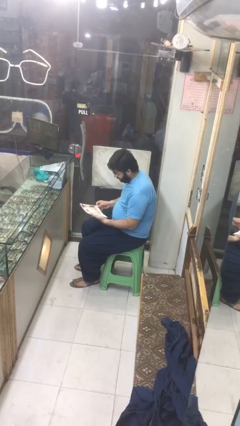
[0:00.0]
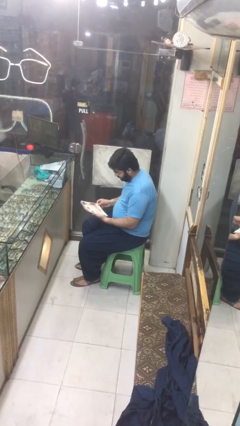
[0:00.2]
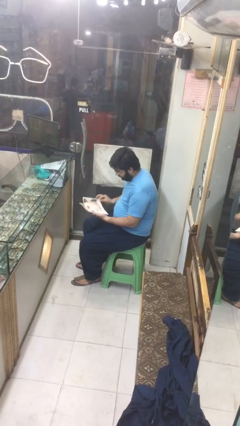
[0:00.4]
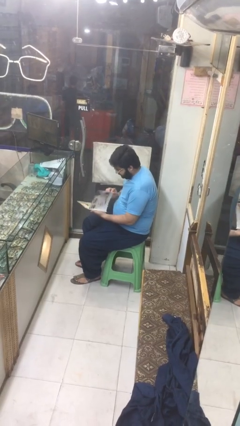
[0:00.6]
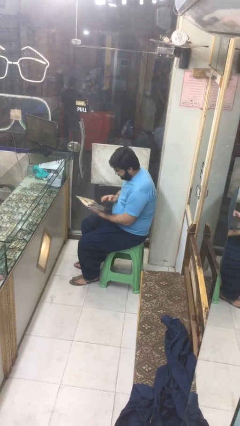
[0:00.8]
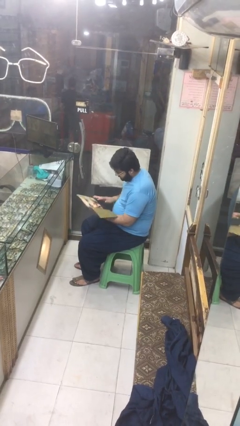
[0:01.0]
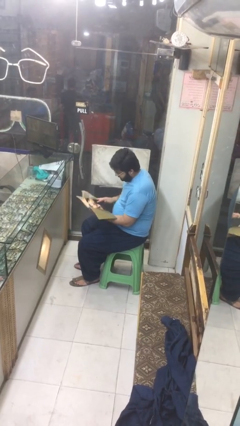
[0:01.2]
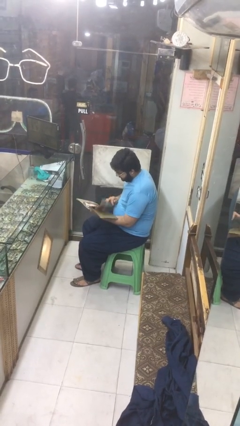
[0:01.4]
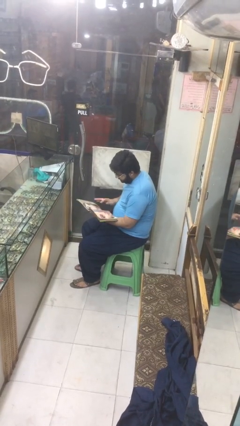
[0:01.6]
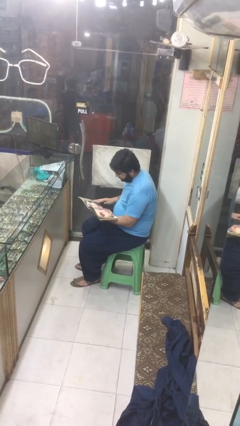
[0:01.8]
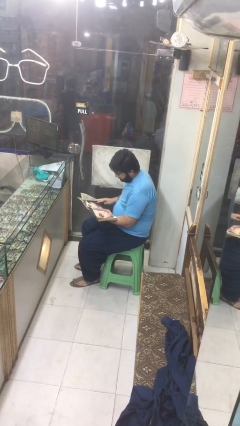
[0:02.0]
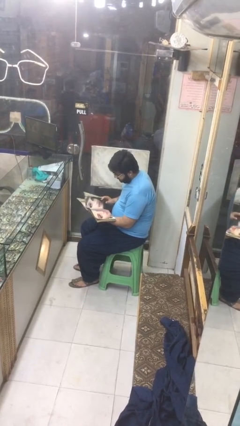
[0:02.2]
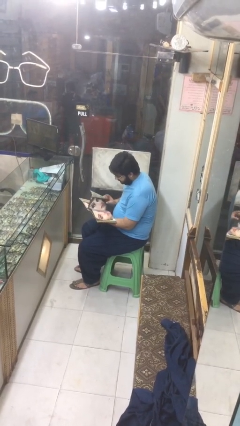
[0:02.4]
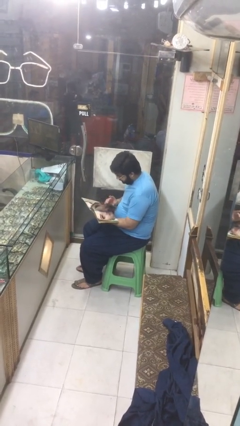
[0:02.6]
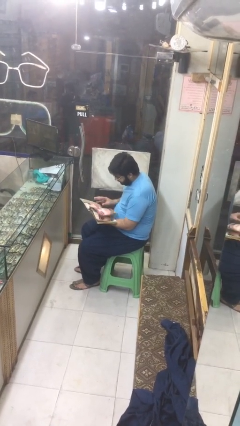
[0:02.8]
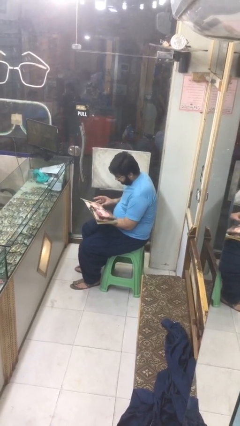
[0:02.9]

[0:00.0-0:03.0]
person reads document

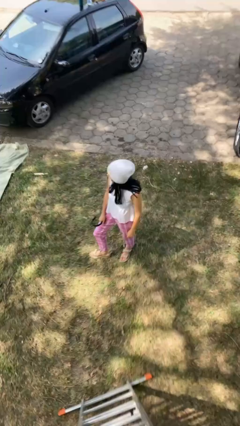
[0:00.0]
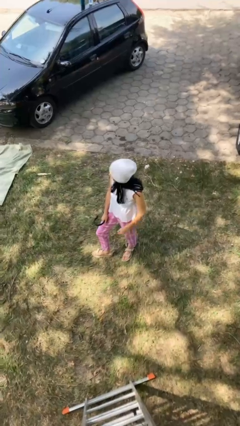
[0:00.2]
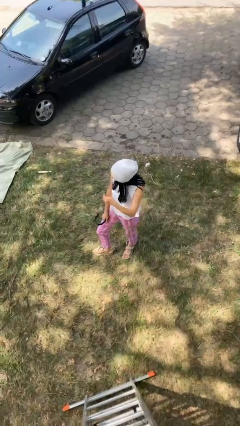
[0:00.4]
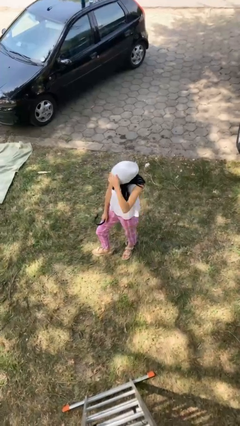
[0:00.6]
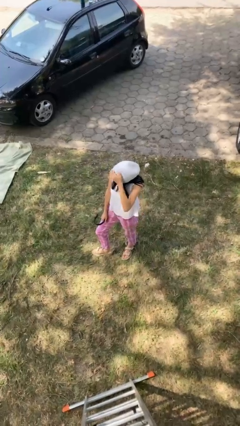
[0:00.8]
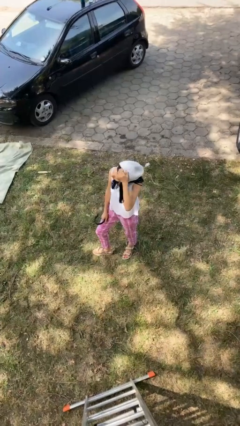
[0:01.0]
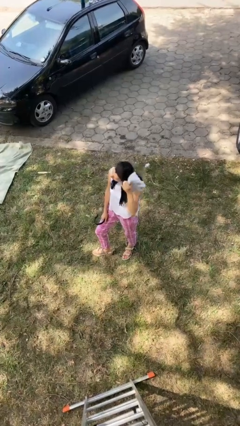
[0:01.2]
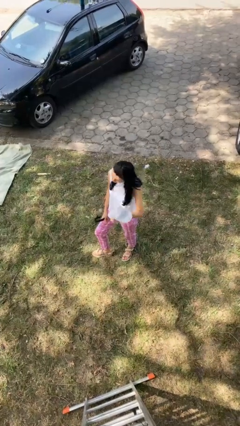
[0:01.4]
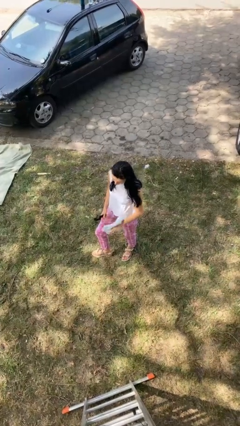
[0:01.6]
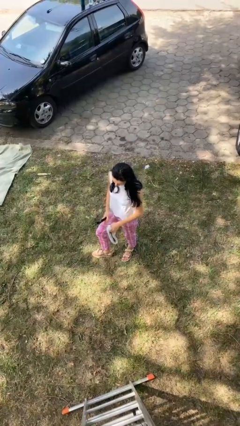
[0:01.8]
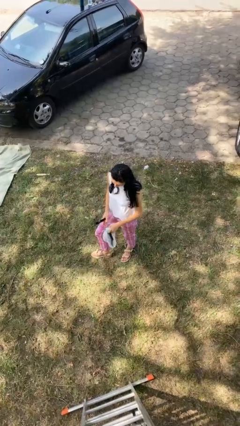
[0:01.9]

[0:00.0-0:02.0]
person takes off hat

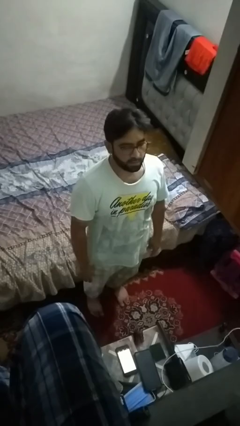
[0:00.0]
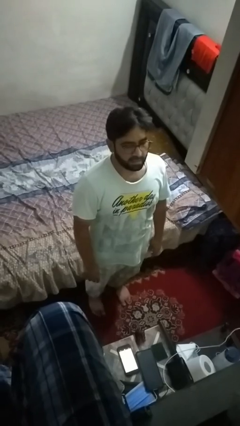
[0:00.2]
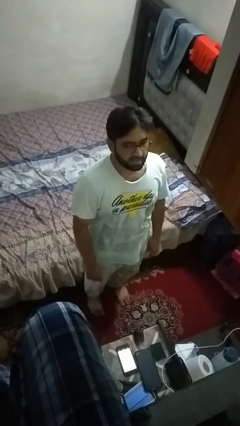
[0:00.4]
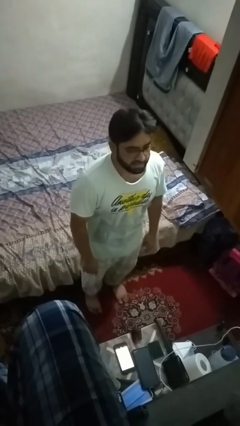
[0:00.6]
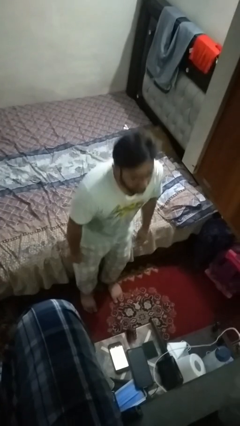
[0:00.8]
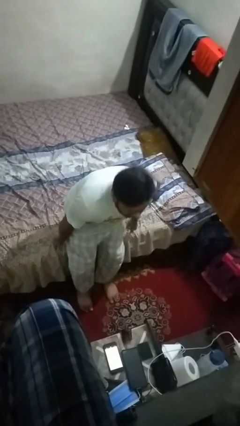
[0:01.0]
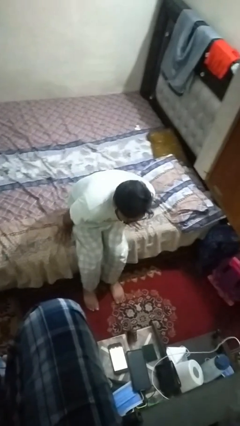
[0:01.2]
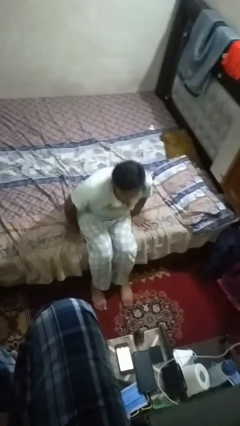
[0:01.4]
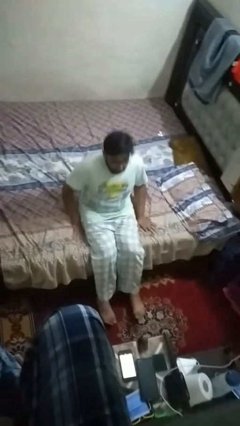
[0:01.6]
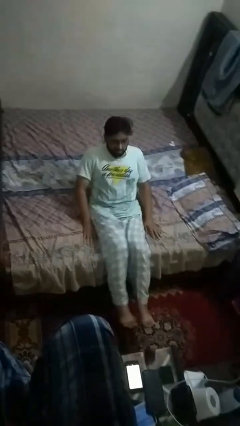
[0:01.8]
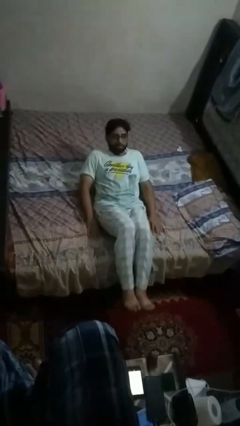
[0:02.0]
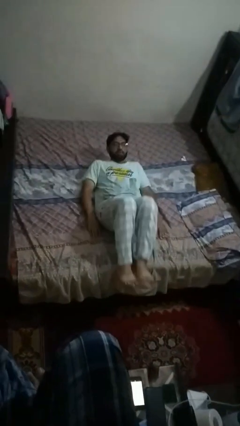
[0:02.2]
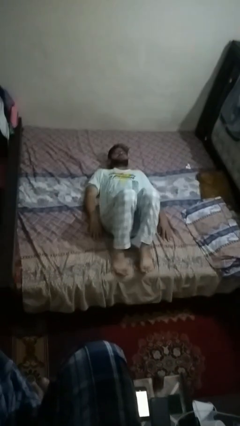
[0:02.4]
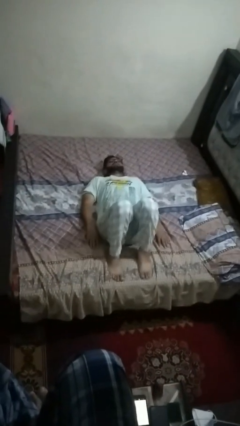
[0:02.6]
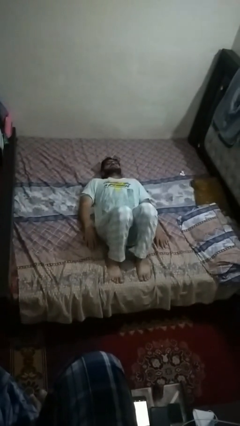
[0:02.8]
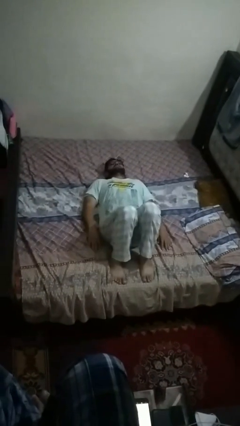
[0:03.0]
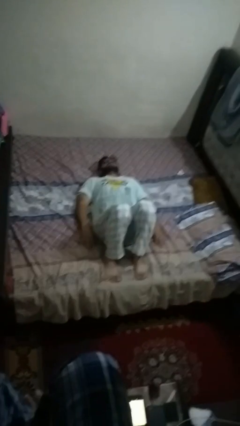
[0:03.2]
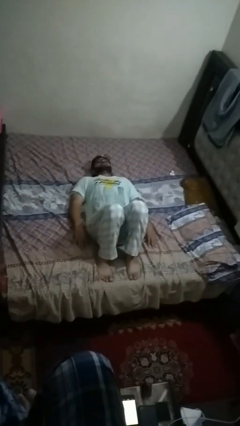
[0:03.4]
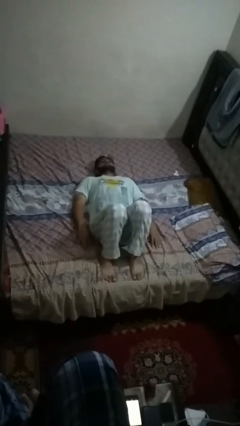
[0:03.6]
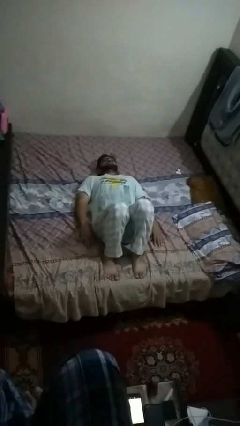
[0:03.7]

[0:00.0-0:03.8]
person lies down on bed

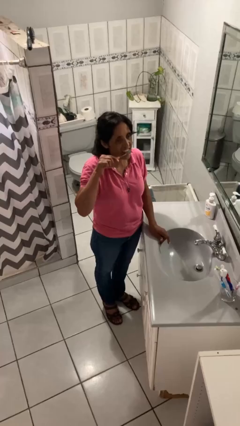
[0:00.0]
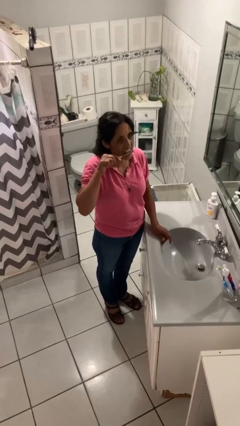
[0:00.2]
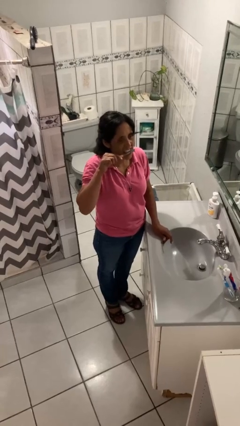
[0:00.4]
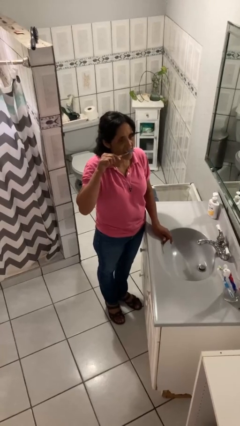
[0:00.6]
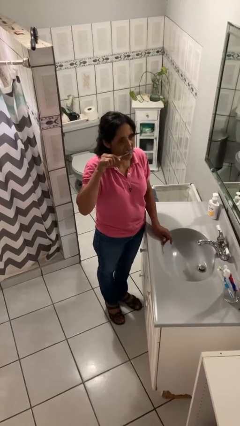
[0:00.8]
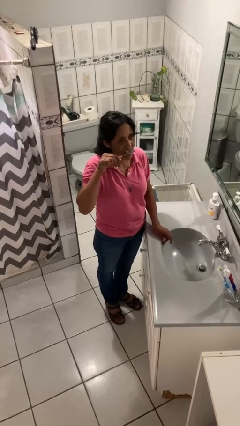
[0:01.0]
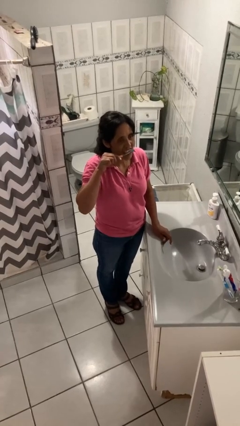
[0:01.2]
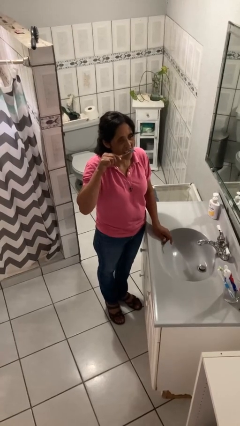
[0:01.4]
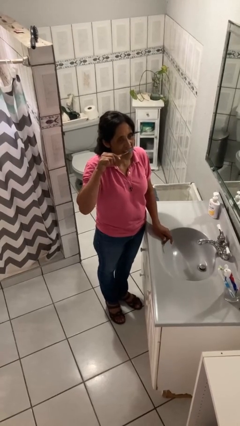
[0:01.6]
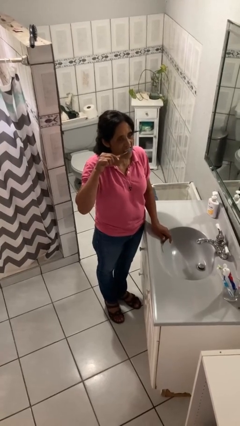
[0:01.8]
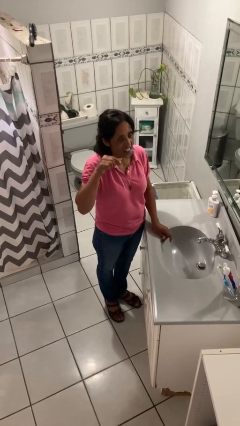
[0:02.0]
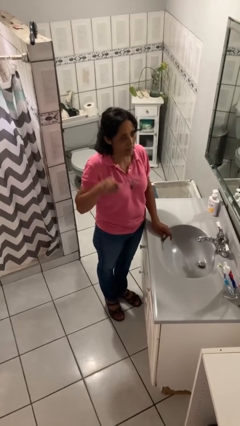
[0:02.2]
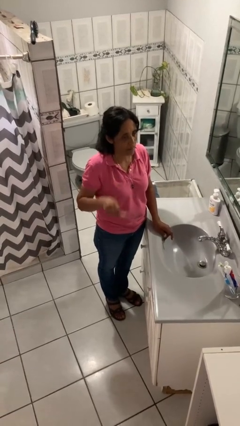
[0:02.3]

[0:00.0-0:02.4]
person brushes teeth

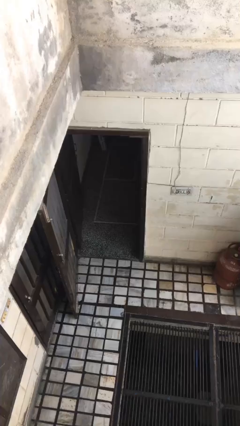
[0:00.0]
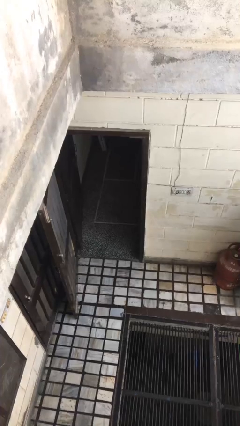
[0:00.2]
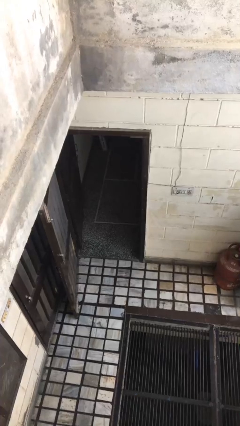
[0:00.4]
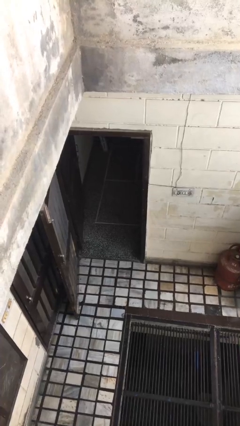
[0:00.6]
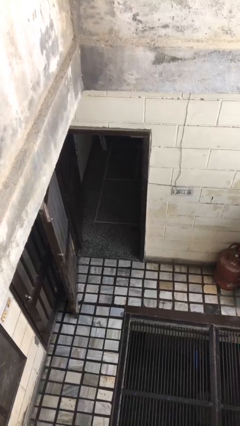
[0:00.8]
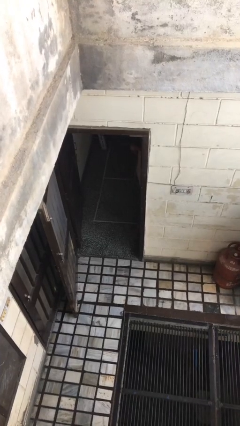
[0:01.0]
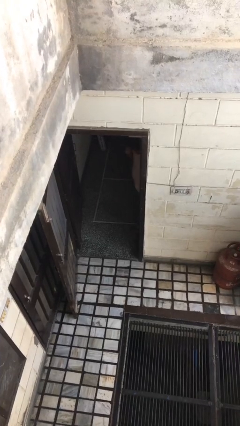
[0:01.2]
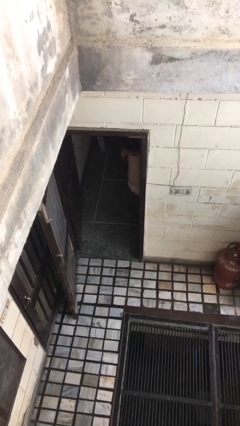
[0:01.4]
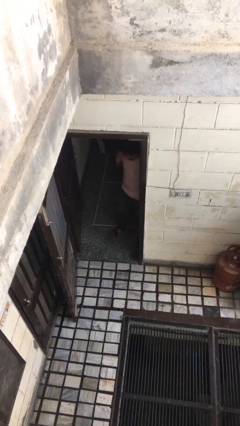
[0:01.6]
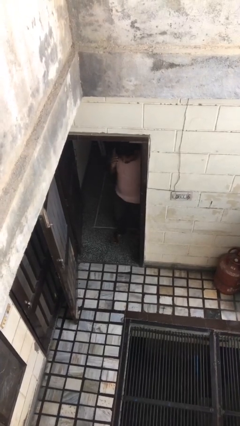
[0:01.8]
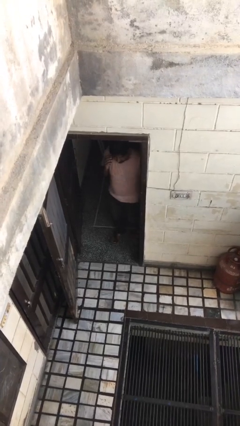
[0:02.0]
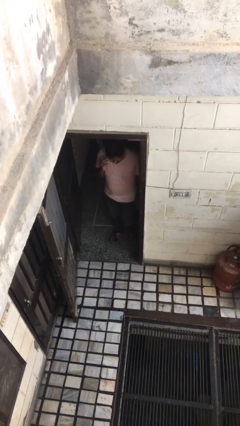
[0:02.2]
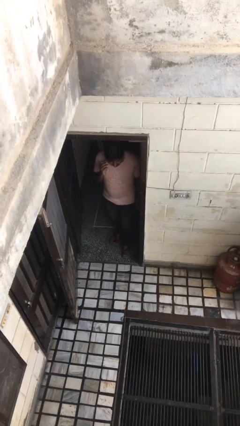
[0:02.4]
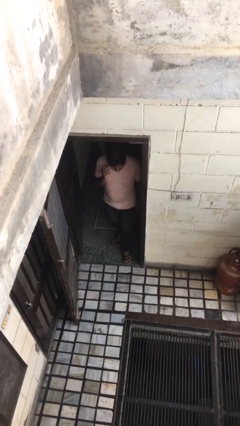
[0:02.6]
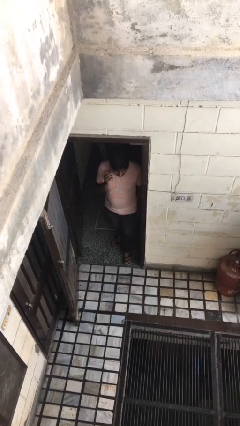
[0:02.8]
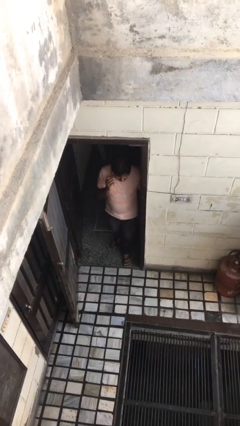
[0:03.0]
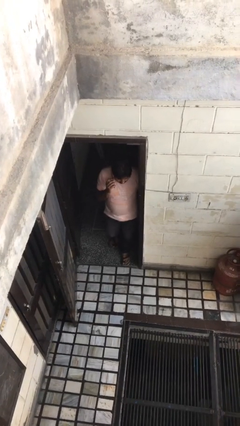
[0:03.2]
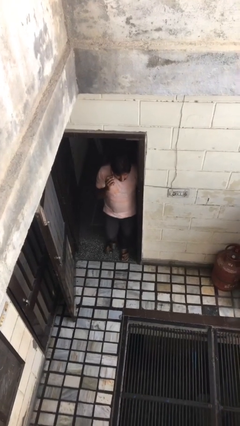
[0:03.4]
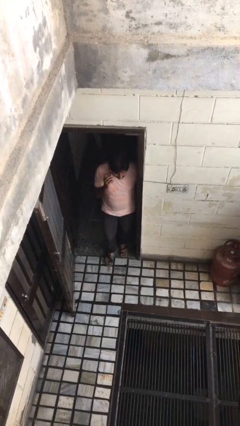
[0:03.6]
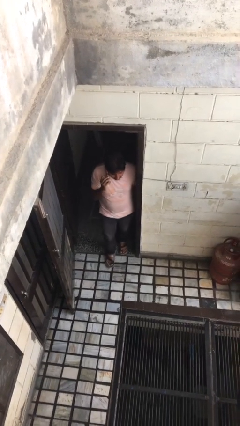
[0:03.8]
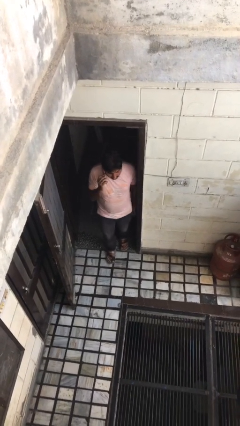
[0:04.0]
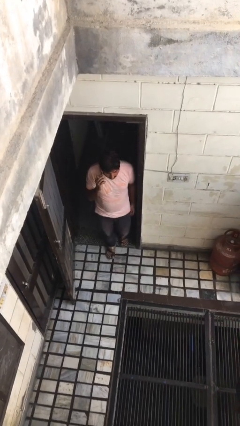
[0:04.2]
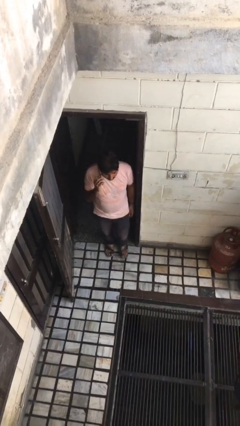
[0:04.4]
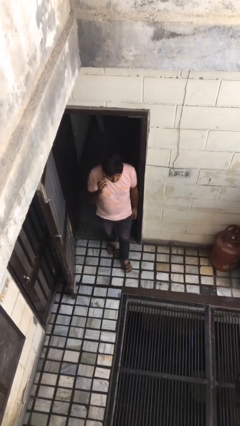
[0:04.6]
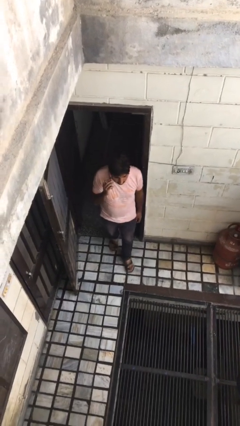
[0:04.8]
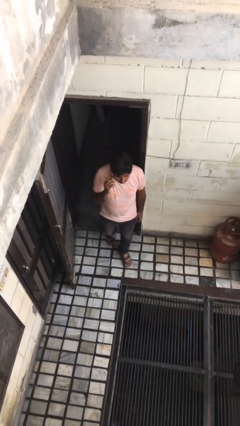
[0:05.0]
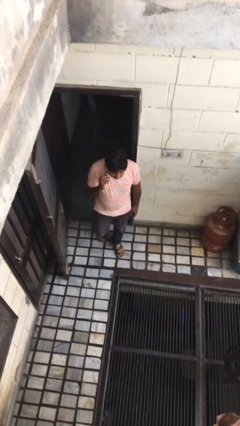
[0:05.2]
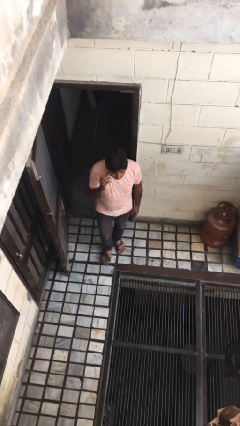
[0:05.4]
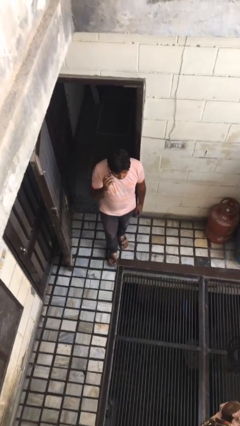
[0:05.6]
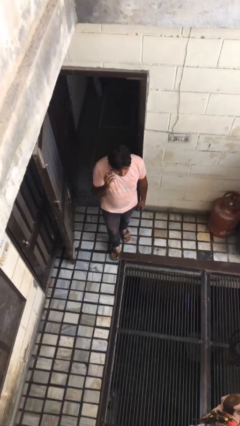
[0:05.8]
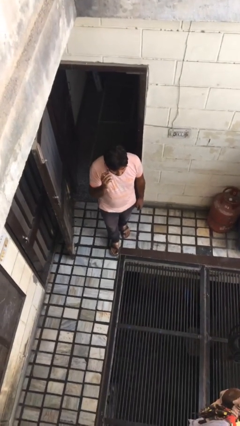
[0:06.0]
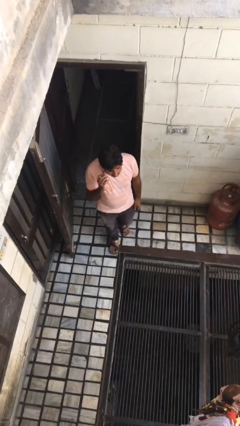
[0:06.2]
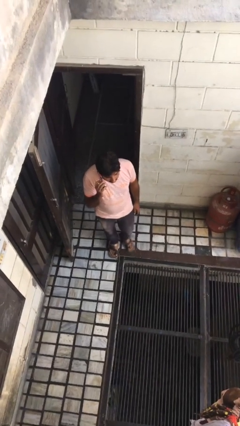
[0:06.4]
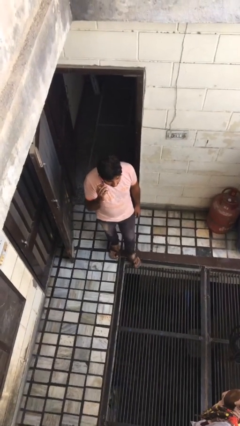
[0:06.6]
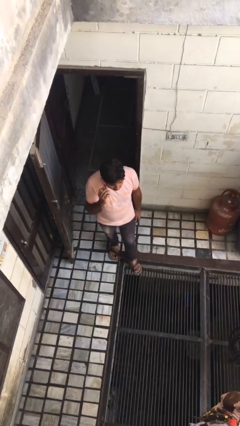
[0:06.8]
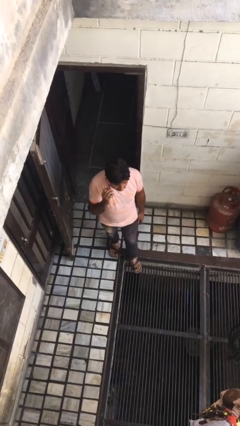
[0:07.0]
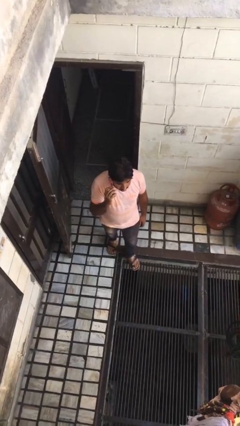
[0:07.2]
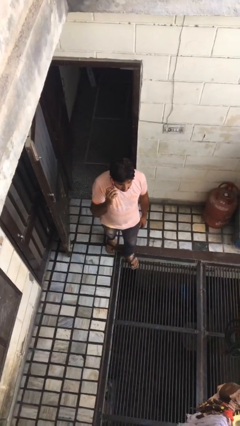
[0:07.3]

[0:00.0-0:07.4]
person enters scene through structure
